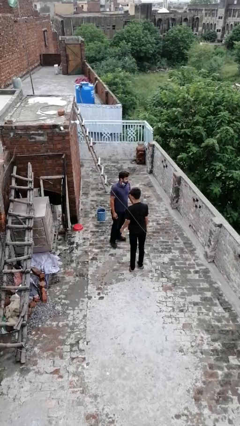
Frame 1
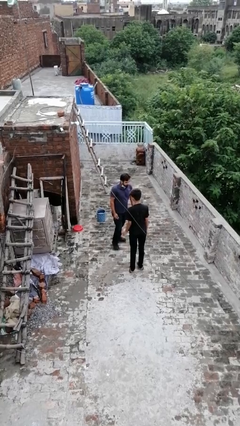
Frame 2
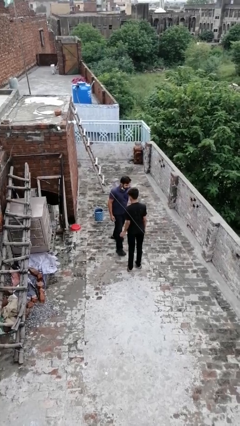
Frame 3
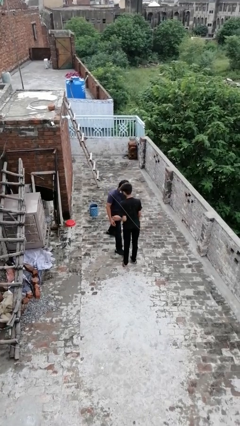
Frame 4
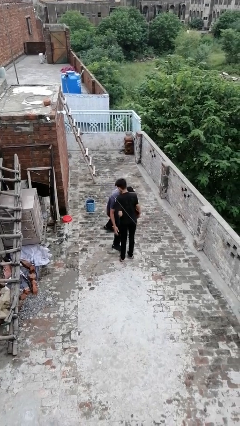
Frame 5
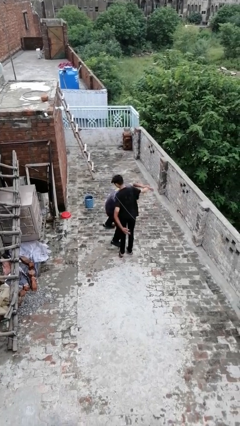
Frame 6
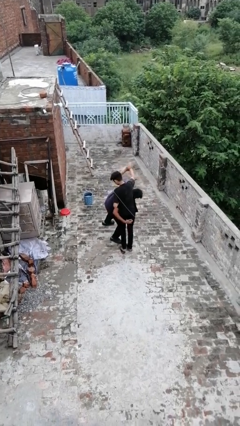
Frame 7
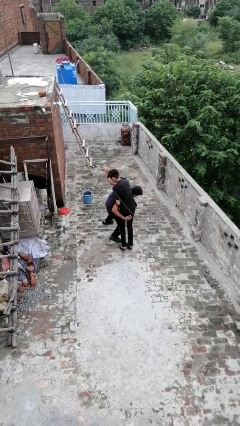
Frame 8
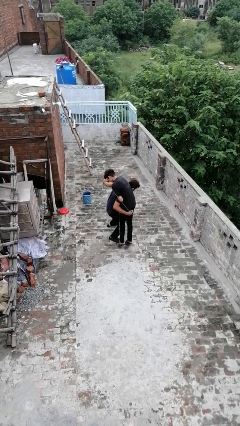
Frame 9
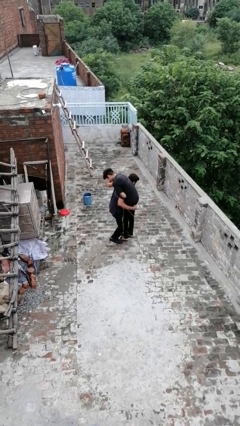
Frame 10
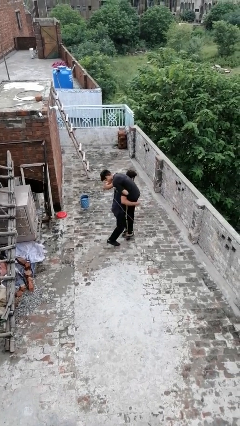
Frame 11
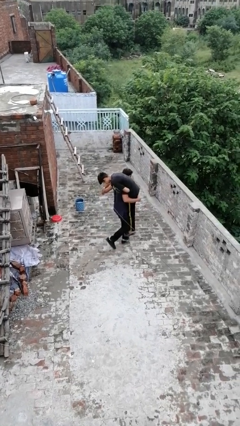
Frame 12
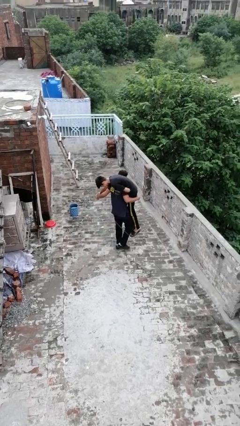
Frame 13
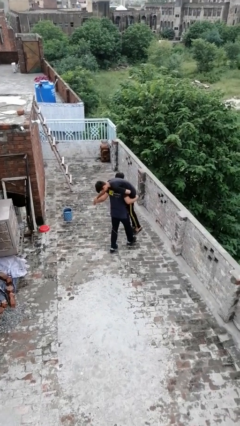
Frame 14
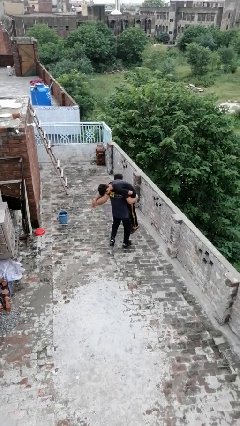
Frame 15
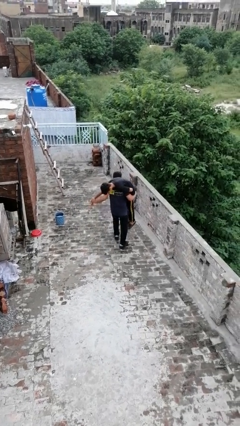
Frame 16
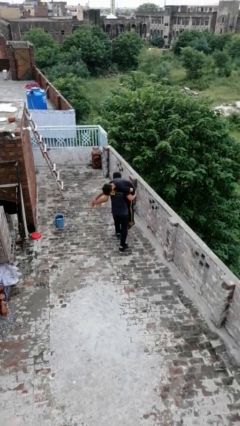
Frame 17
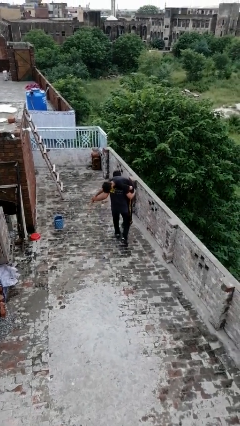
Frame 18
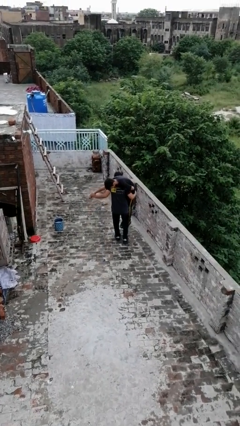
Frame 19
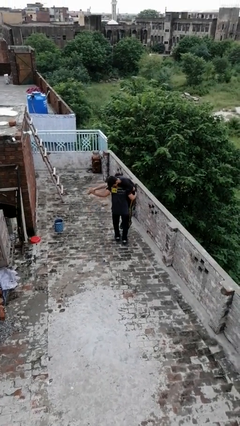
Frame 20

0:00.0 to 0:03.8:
person carries person on shoulders

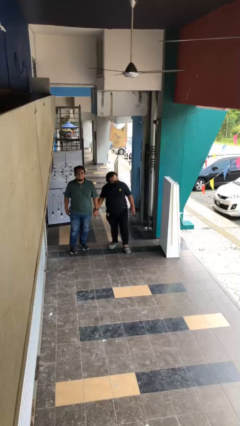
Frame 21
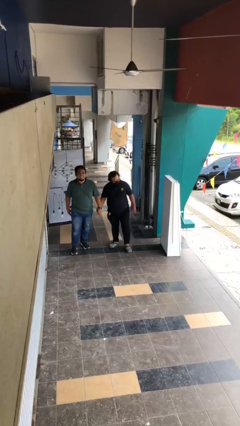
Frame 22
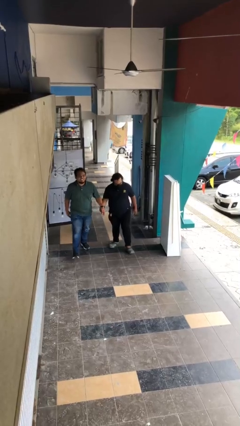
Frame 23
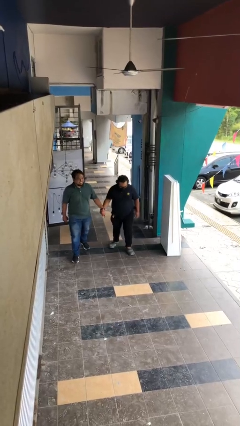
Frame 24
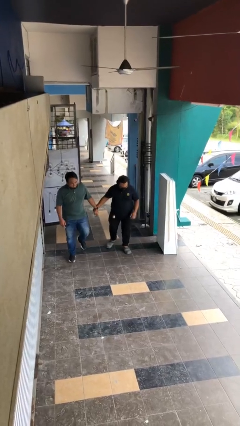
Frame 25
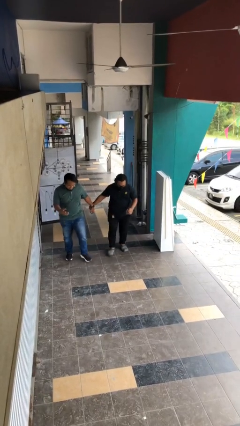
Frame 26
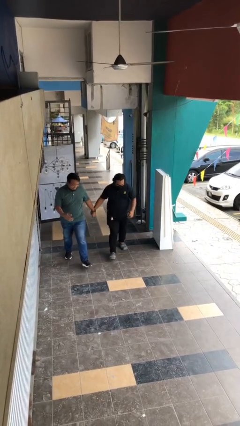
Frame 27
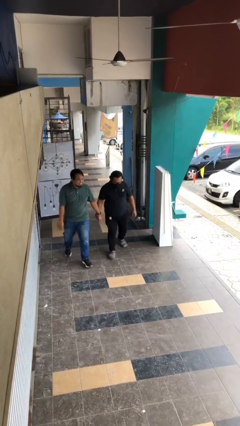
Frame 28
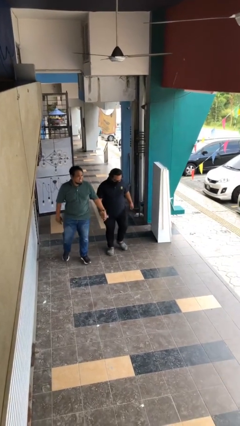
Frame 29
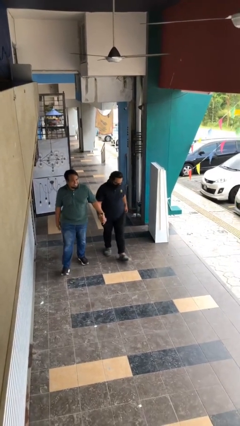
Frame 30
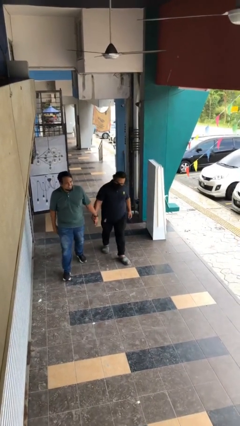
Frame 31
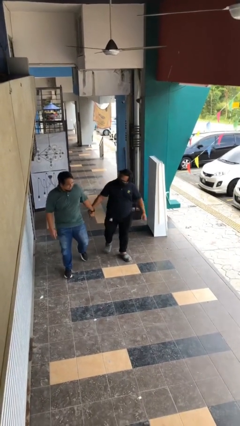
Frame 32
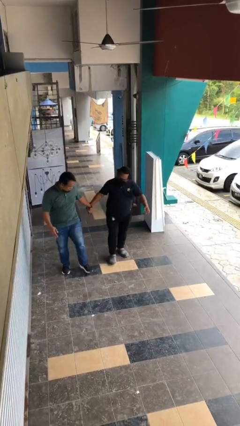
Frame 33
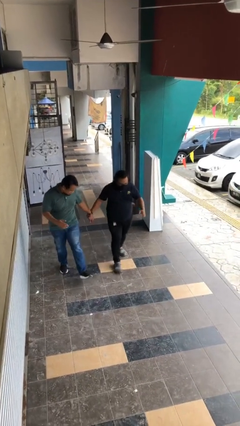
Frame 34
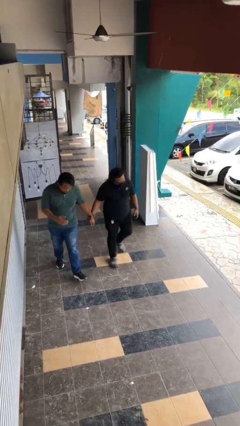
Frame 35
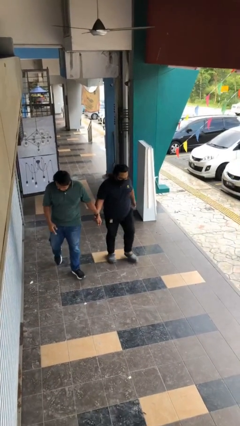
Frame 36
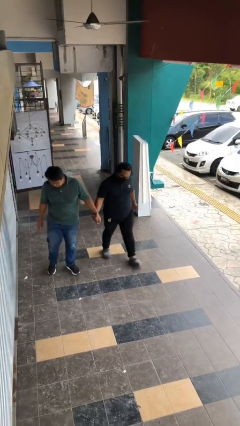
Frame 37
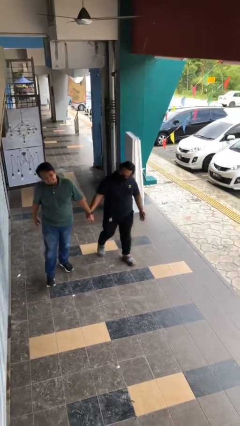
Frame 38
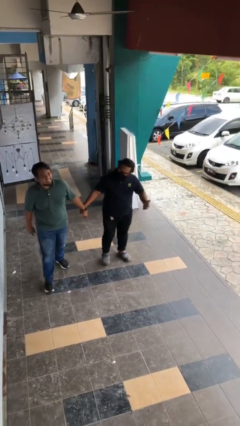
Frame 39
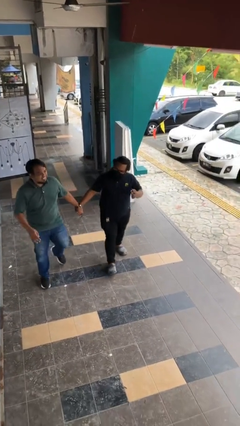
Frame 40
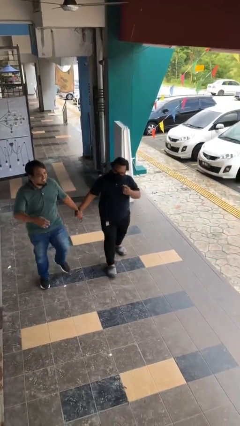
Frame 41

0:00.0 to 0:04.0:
person holds hand

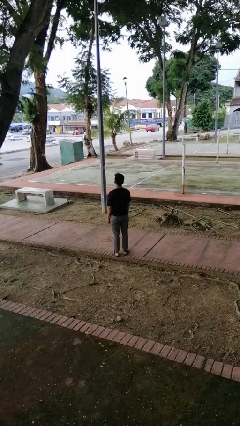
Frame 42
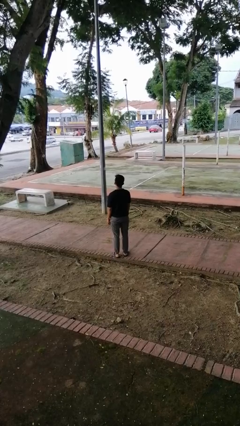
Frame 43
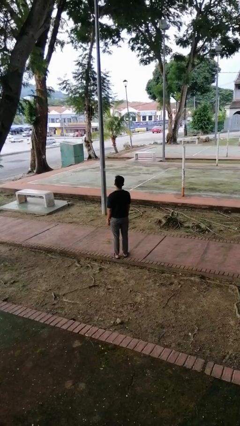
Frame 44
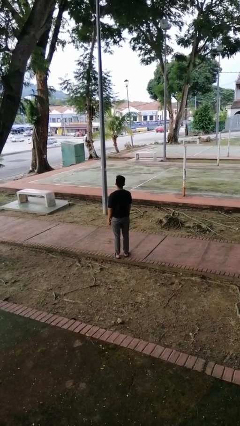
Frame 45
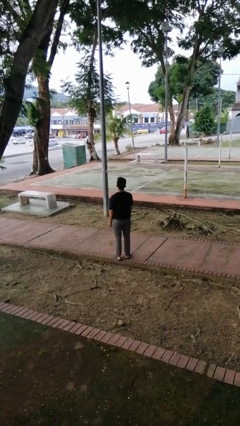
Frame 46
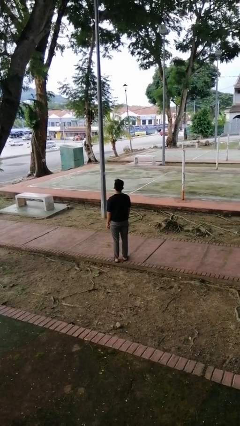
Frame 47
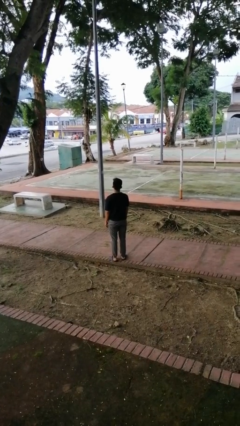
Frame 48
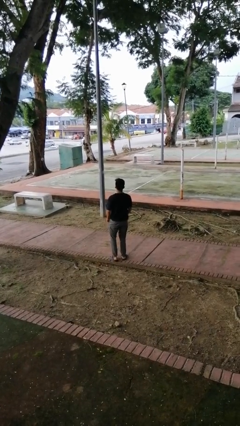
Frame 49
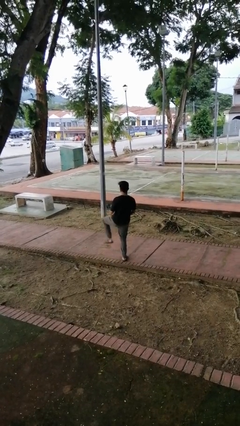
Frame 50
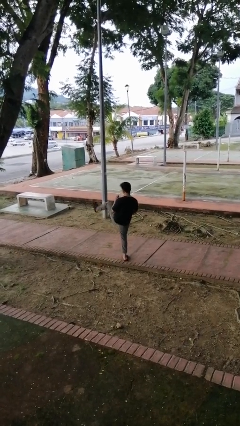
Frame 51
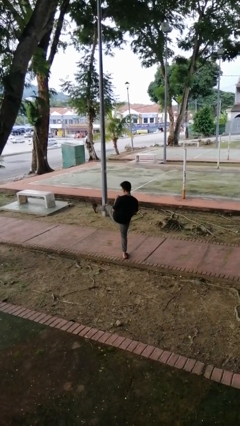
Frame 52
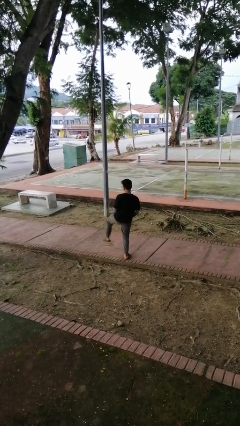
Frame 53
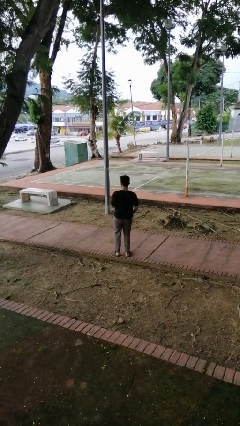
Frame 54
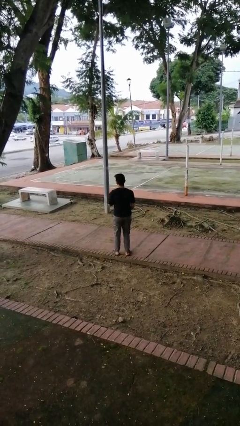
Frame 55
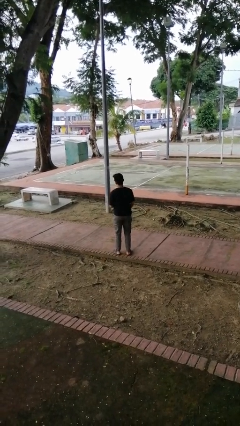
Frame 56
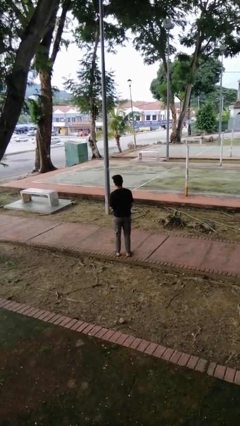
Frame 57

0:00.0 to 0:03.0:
person karate kicks

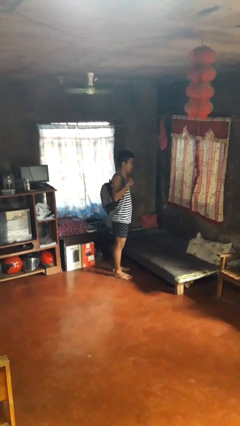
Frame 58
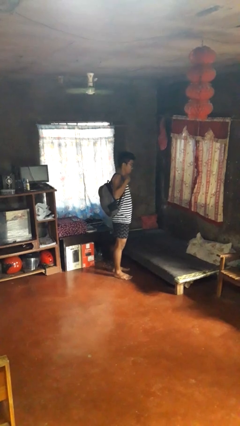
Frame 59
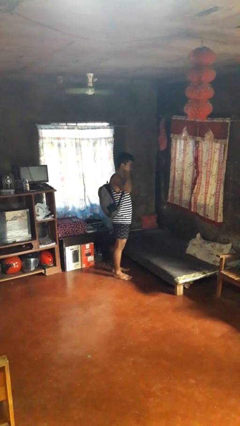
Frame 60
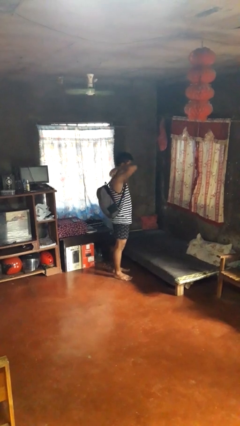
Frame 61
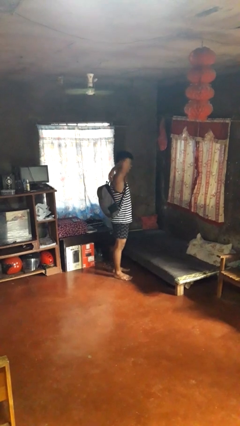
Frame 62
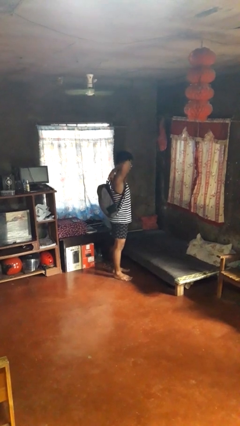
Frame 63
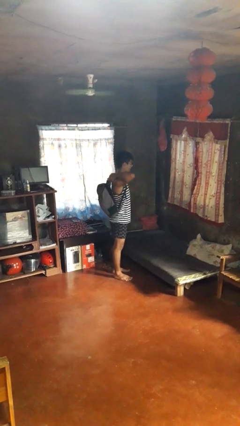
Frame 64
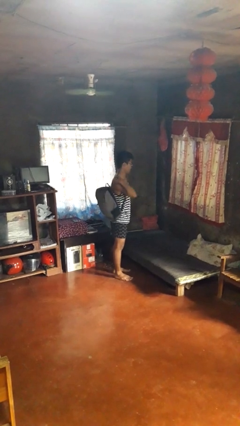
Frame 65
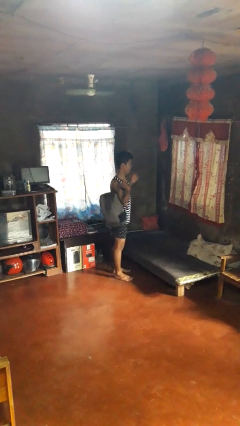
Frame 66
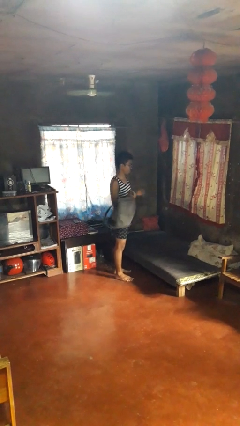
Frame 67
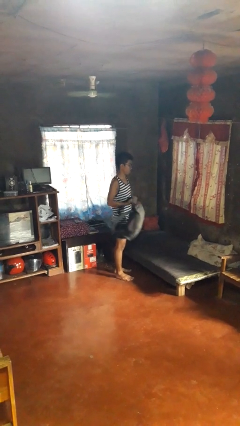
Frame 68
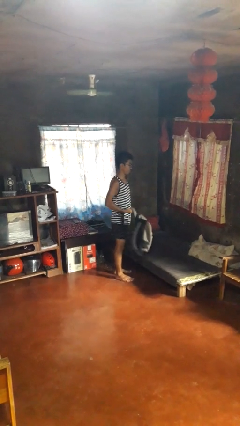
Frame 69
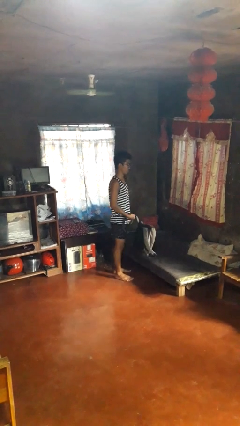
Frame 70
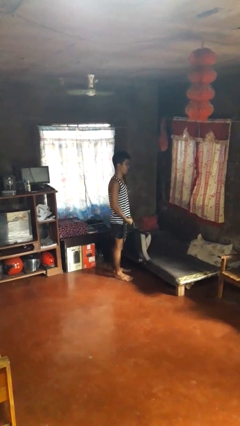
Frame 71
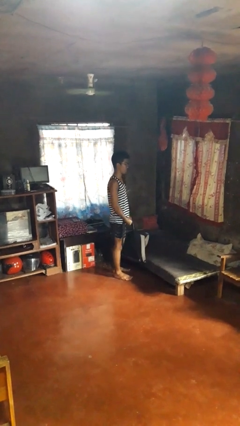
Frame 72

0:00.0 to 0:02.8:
person takes off backpack

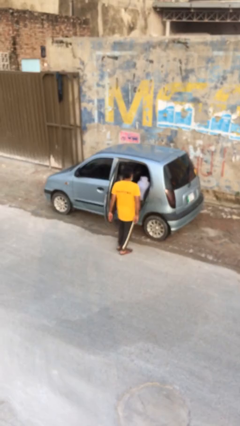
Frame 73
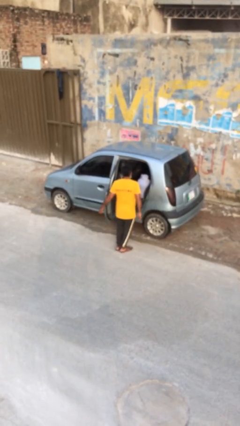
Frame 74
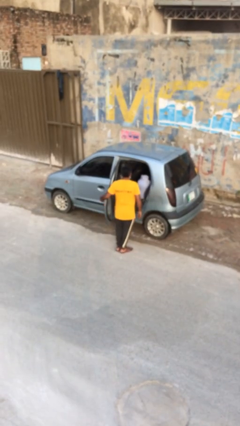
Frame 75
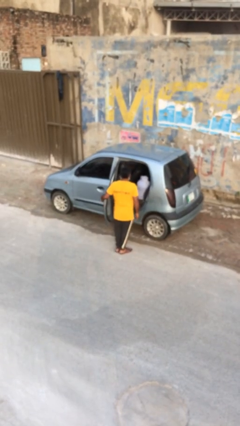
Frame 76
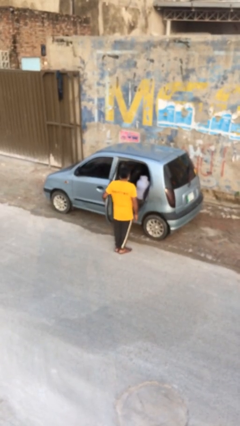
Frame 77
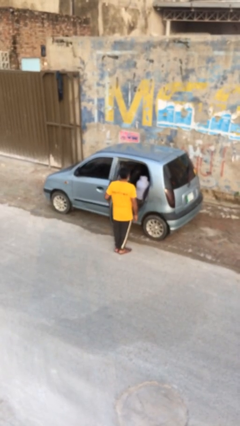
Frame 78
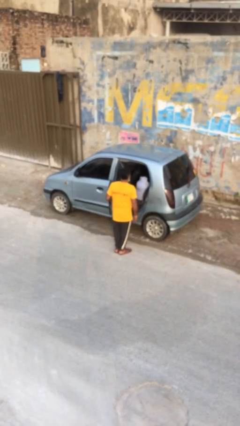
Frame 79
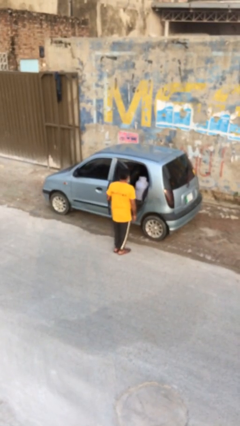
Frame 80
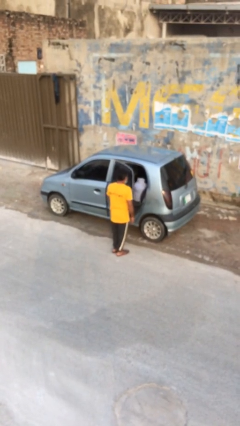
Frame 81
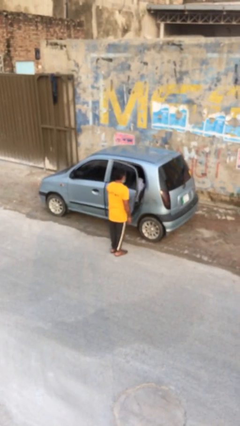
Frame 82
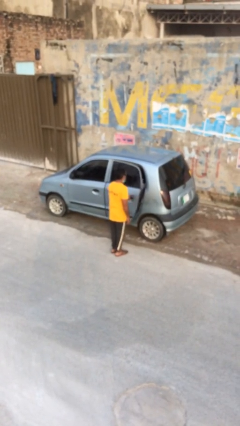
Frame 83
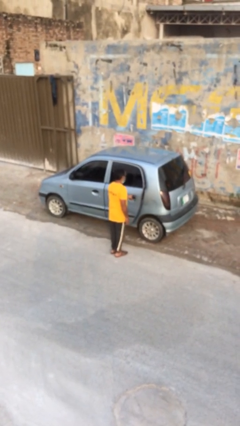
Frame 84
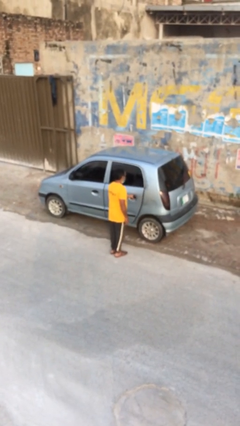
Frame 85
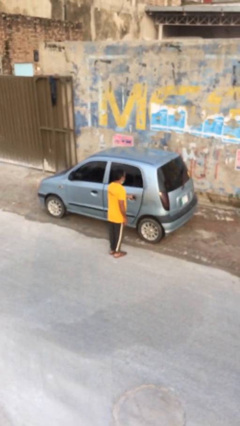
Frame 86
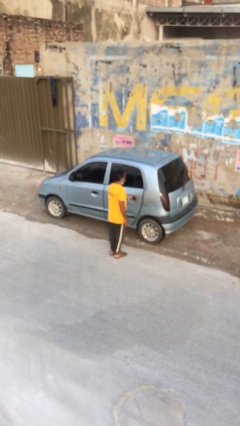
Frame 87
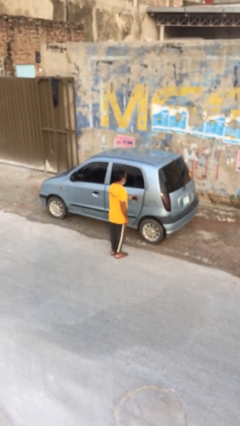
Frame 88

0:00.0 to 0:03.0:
person closes car door

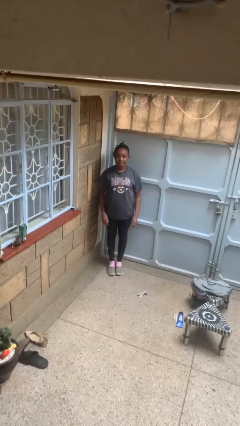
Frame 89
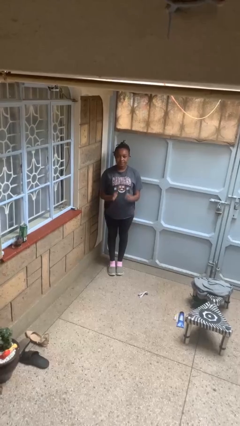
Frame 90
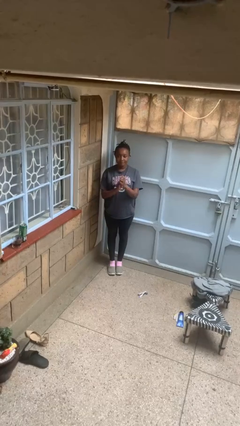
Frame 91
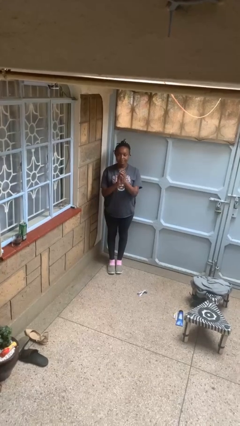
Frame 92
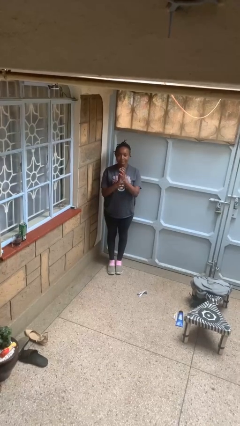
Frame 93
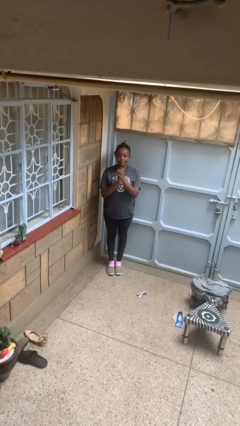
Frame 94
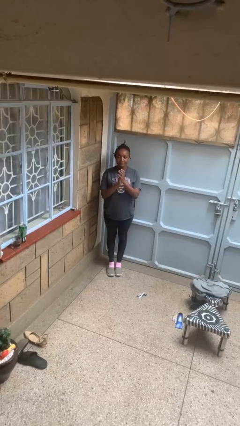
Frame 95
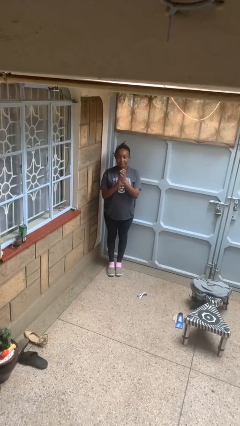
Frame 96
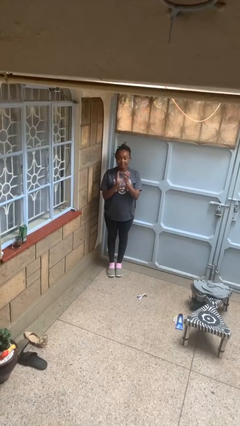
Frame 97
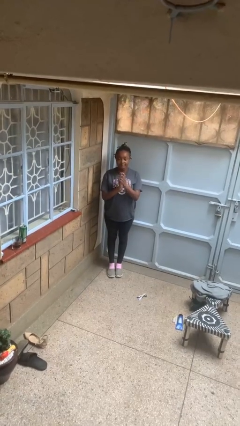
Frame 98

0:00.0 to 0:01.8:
person claps hands
